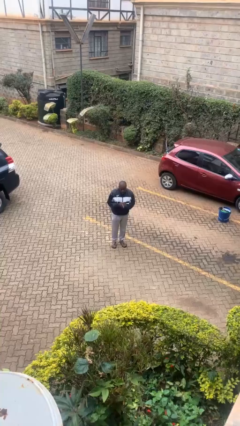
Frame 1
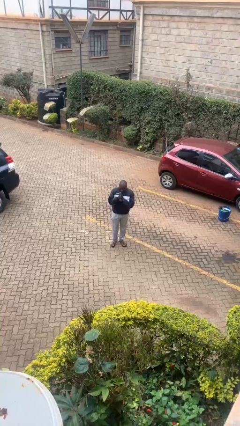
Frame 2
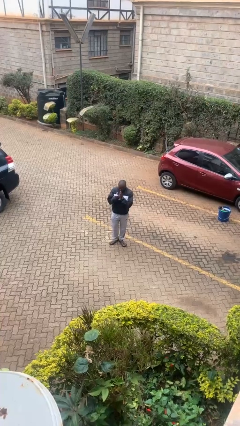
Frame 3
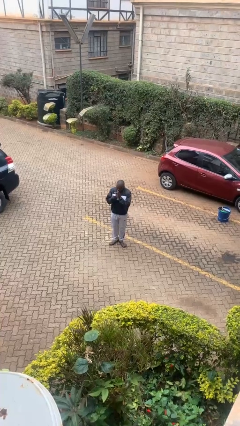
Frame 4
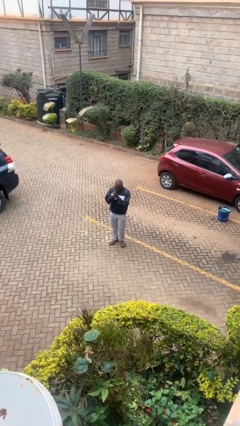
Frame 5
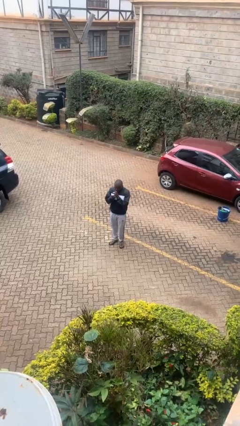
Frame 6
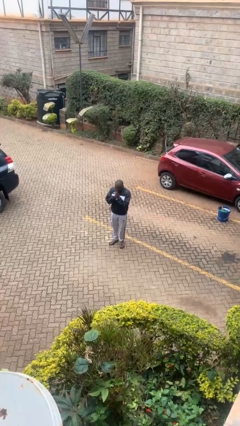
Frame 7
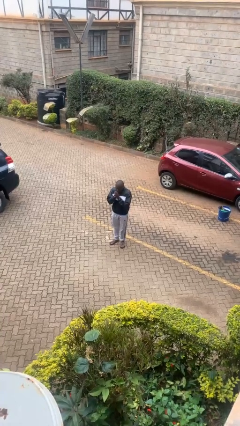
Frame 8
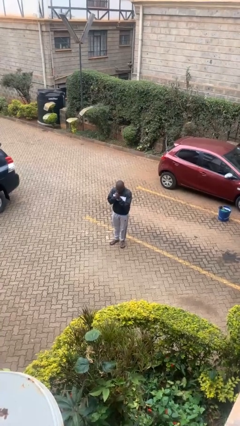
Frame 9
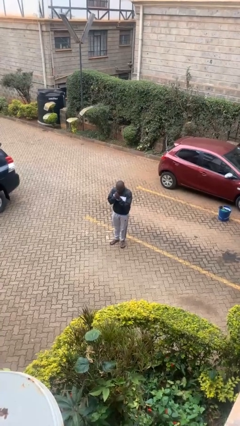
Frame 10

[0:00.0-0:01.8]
person blows into hands

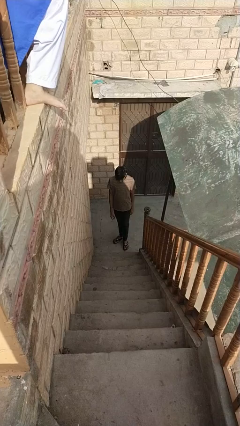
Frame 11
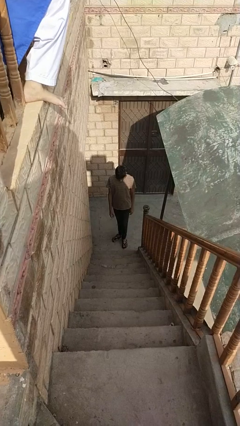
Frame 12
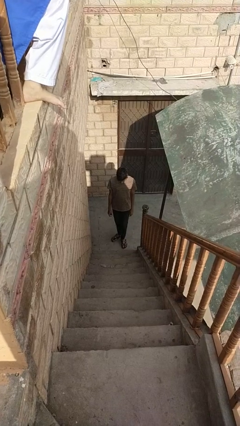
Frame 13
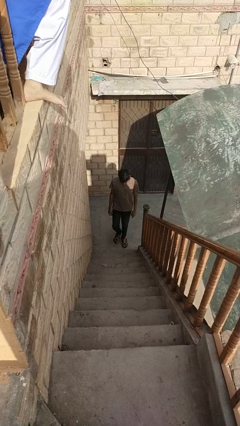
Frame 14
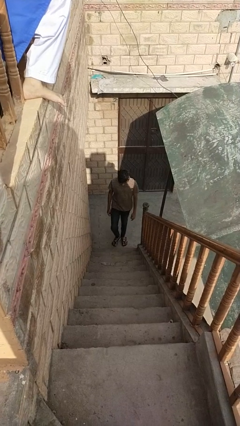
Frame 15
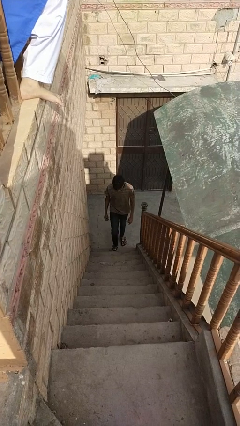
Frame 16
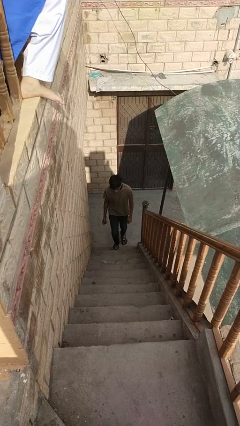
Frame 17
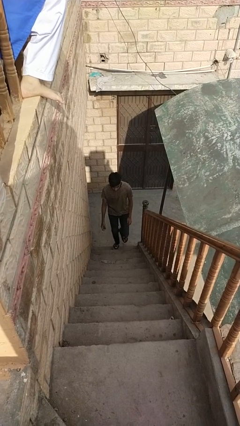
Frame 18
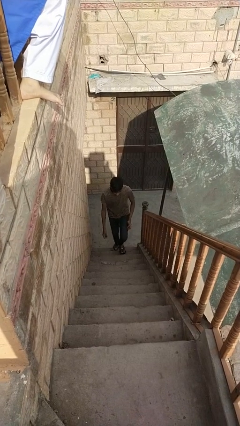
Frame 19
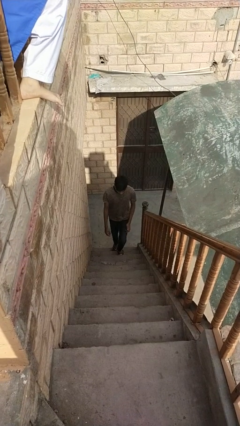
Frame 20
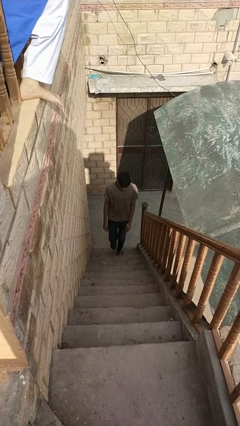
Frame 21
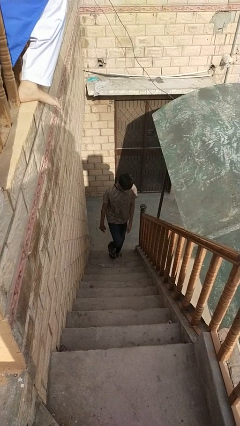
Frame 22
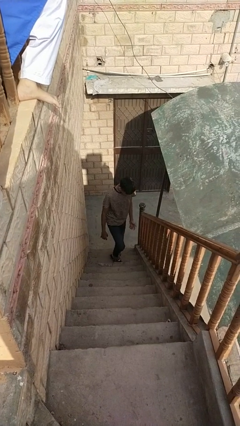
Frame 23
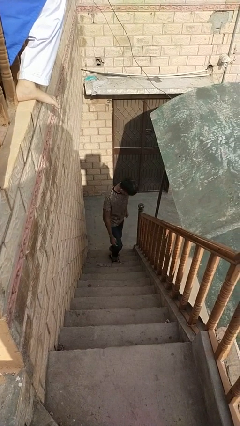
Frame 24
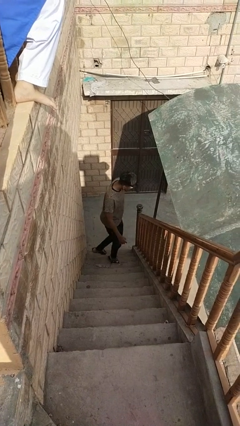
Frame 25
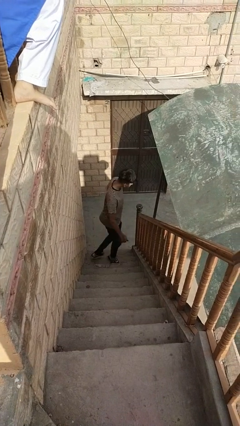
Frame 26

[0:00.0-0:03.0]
person climbs up stairs

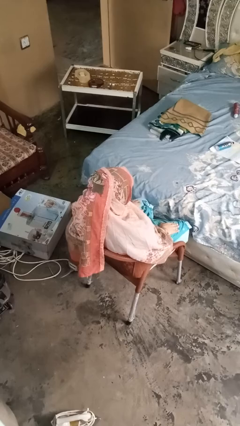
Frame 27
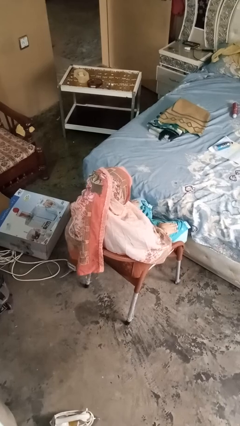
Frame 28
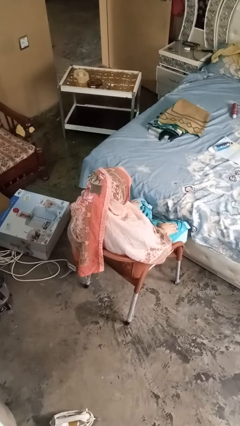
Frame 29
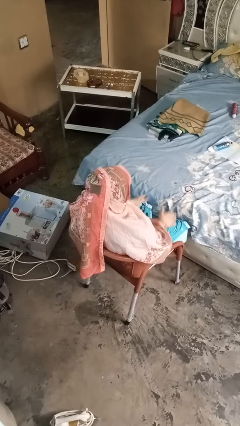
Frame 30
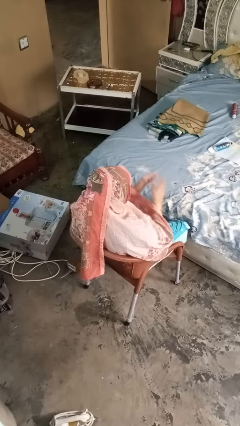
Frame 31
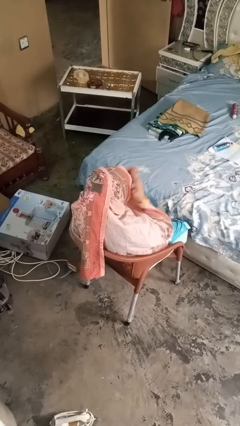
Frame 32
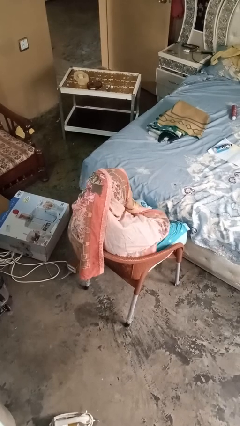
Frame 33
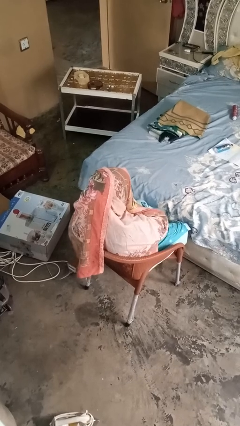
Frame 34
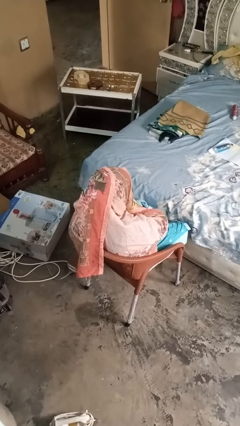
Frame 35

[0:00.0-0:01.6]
person covers face with hands

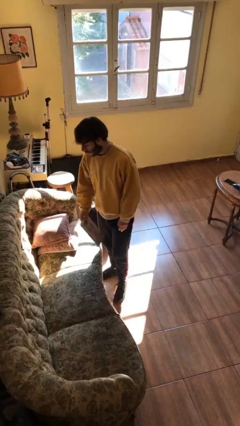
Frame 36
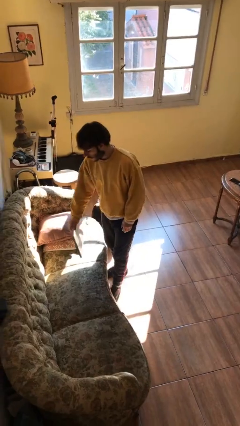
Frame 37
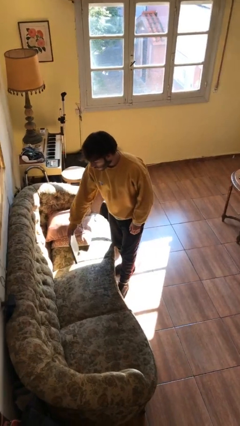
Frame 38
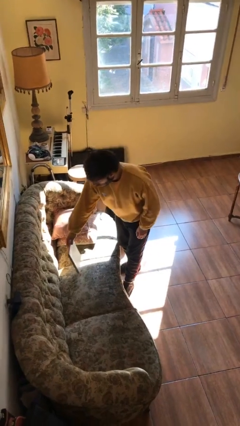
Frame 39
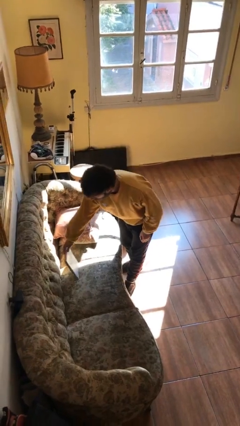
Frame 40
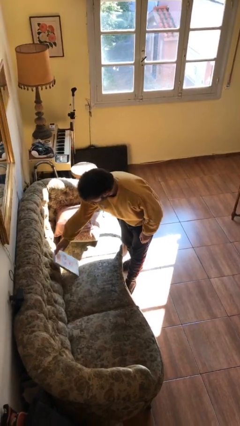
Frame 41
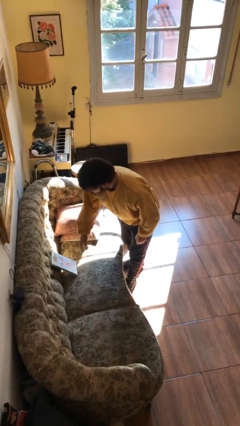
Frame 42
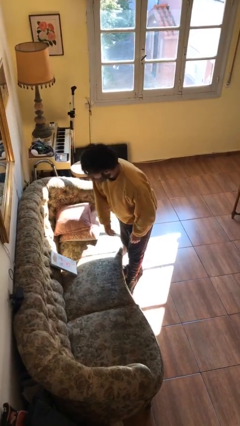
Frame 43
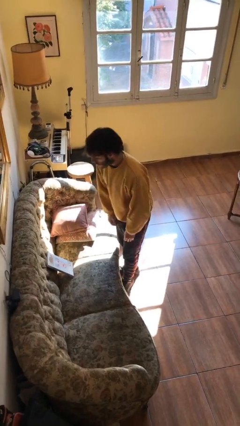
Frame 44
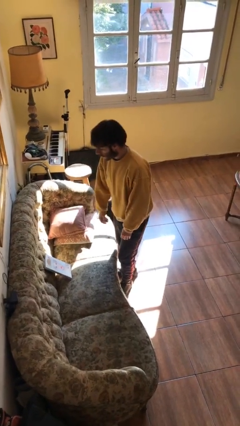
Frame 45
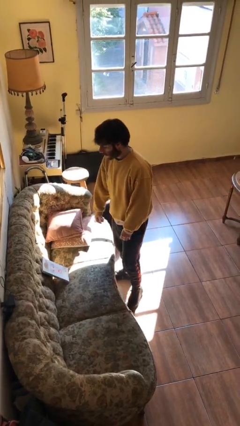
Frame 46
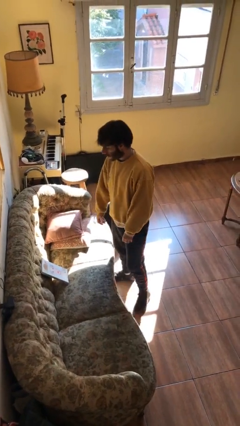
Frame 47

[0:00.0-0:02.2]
person puts down object on couch

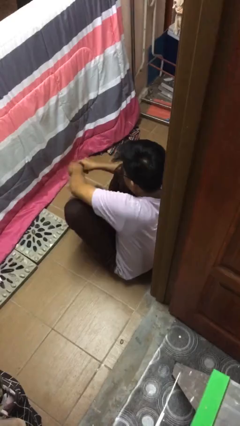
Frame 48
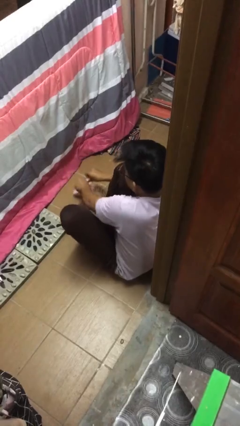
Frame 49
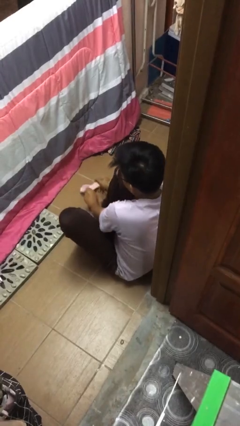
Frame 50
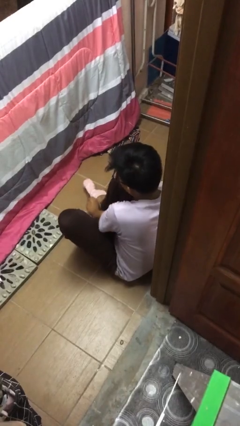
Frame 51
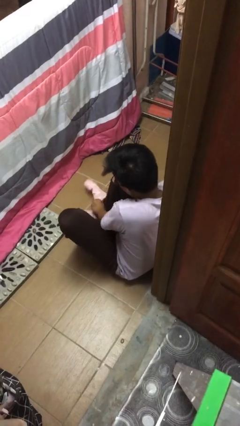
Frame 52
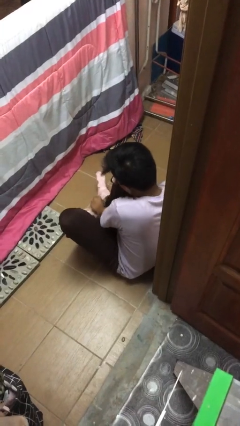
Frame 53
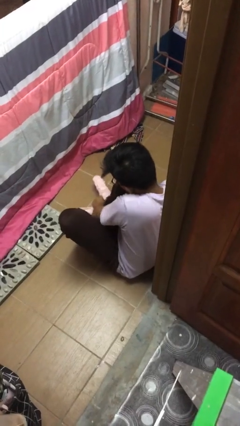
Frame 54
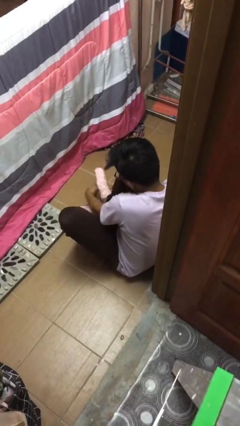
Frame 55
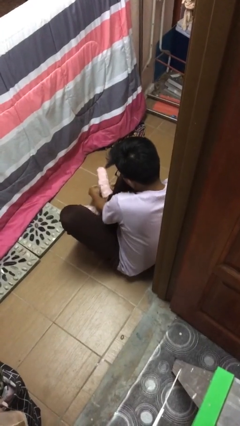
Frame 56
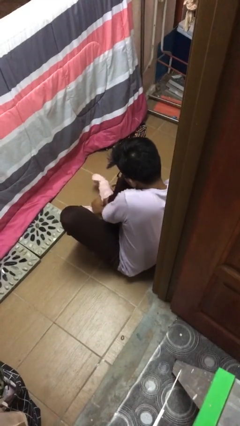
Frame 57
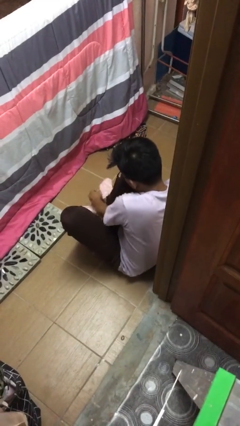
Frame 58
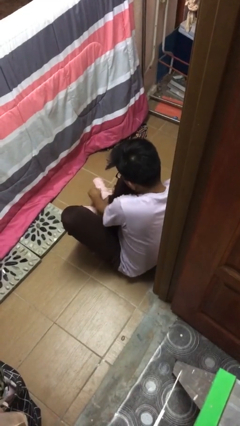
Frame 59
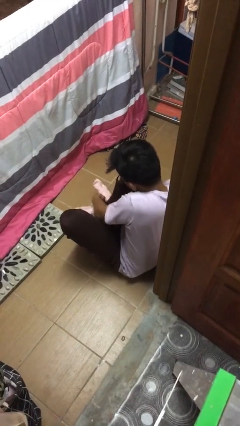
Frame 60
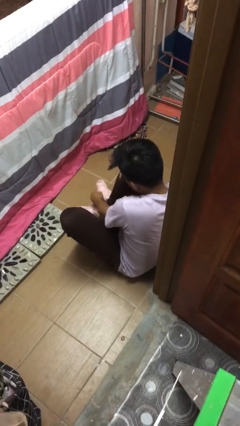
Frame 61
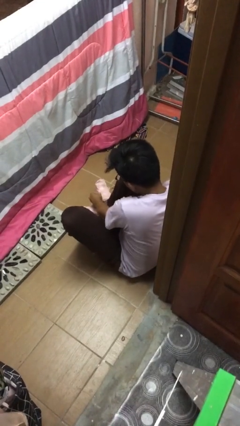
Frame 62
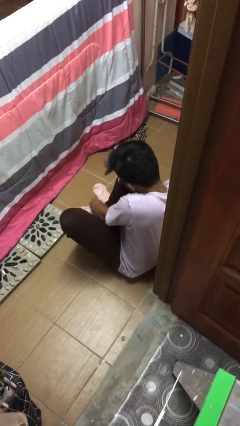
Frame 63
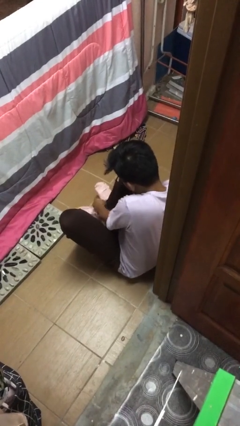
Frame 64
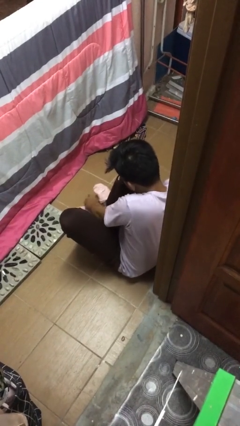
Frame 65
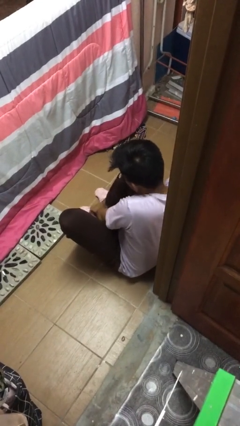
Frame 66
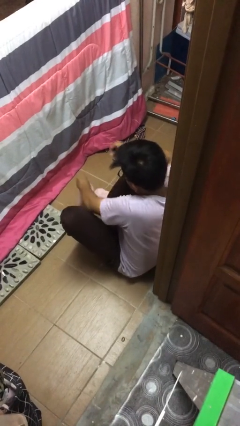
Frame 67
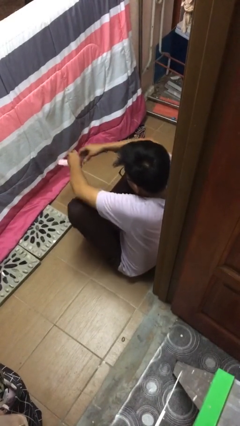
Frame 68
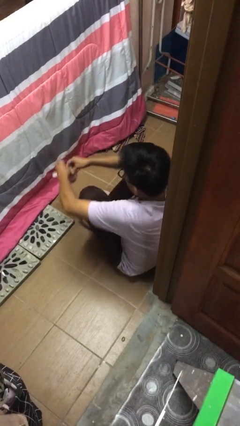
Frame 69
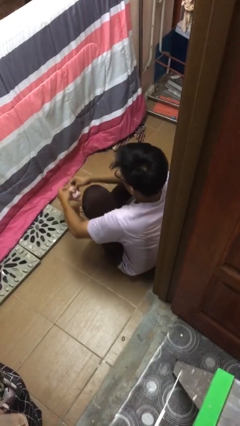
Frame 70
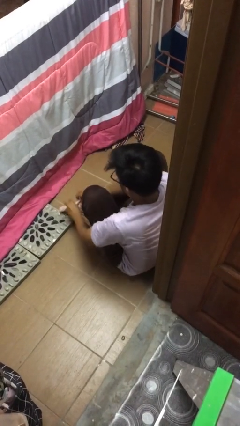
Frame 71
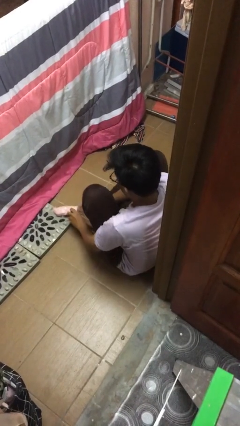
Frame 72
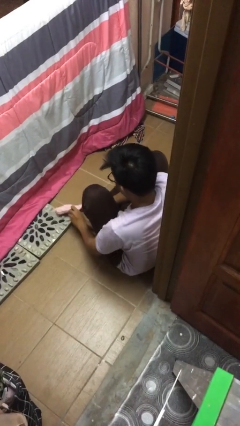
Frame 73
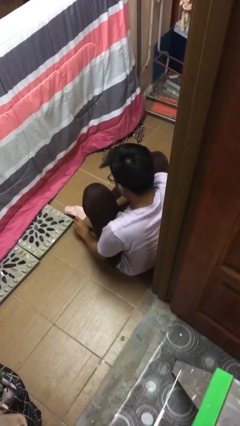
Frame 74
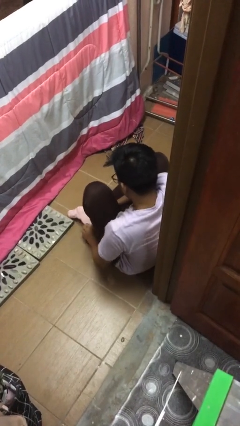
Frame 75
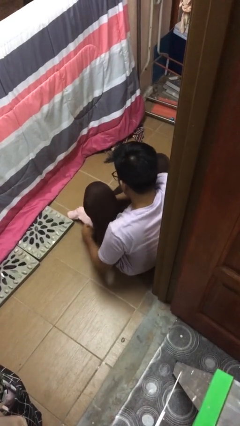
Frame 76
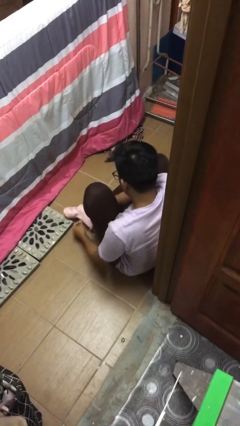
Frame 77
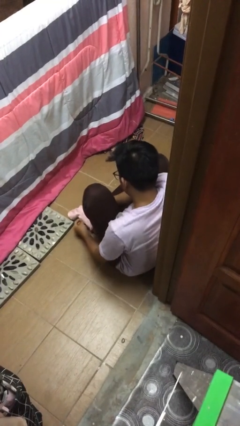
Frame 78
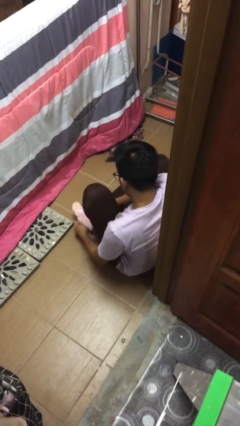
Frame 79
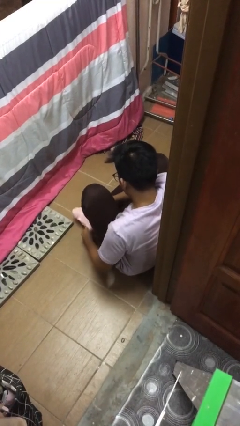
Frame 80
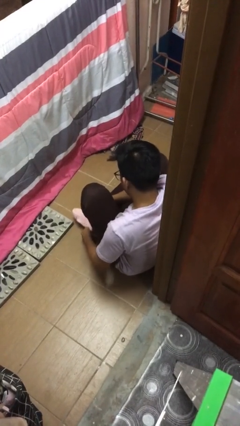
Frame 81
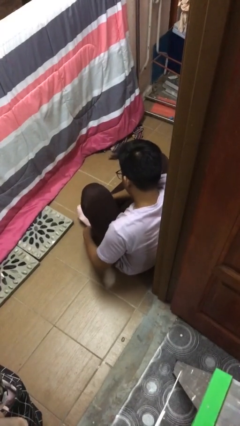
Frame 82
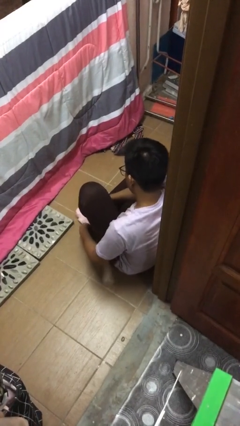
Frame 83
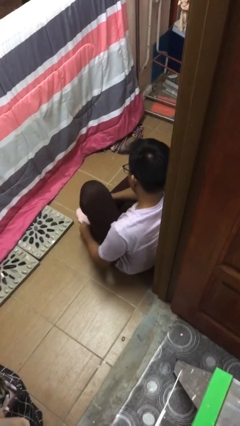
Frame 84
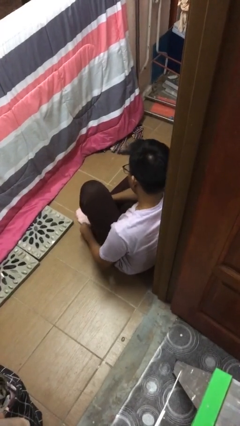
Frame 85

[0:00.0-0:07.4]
person puts on socks

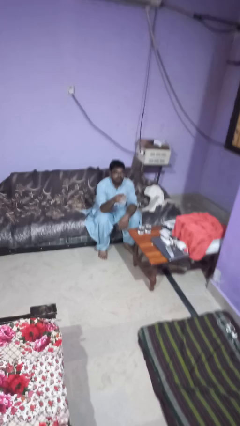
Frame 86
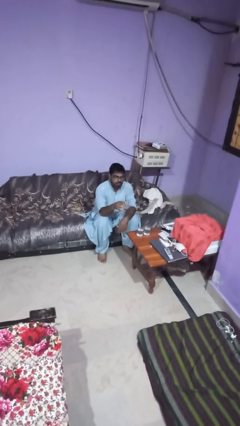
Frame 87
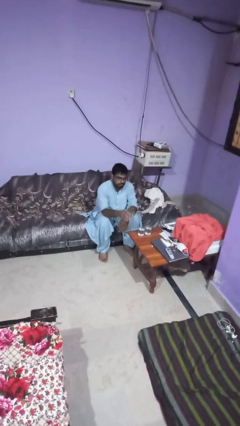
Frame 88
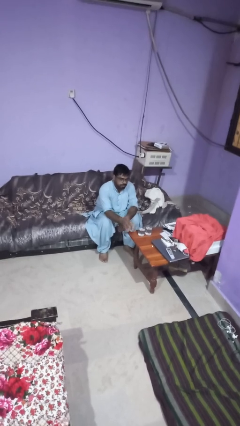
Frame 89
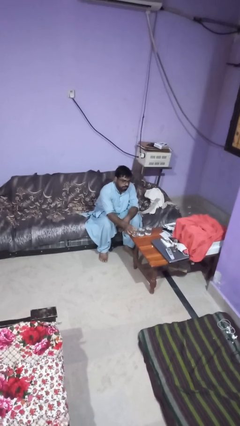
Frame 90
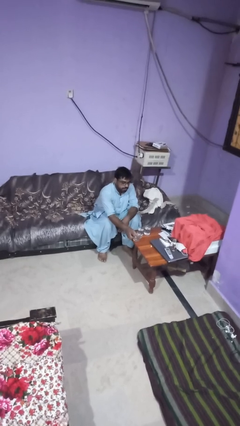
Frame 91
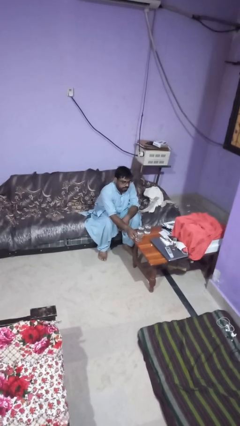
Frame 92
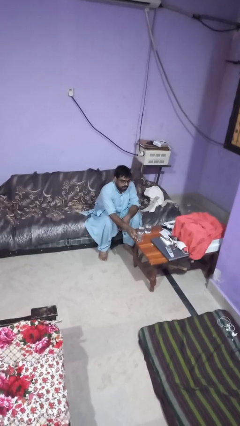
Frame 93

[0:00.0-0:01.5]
person puts down object on table

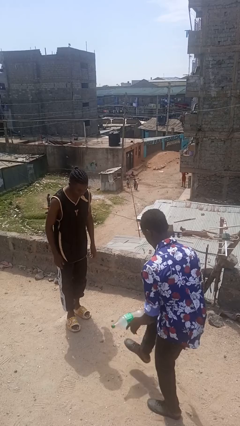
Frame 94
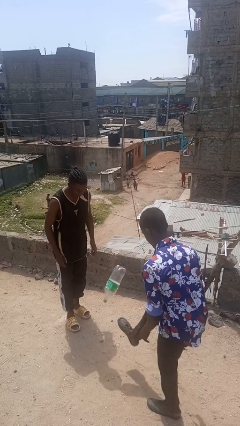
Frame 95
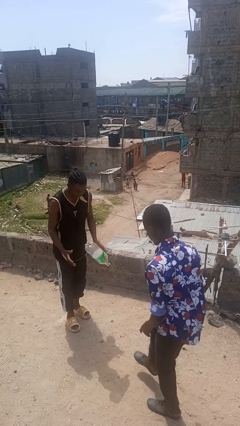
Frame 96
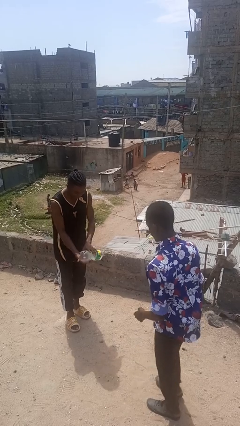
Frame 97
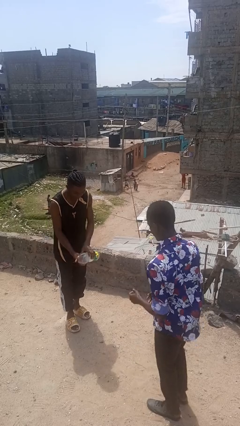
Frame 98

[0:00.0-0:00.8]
person kicks object to person
